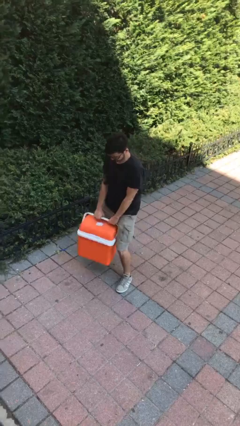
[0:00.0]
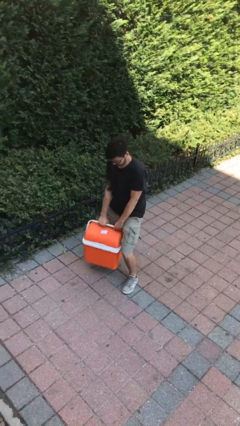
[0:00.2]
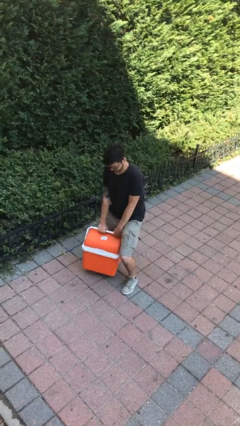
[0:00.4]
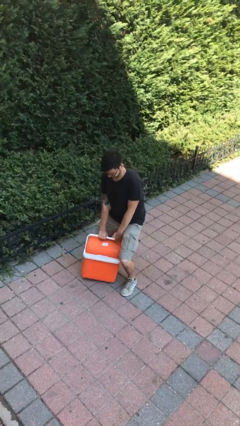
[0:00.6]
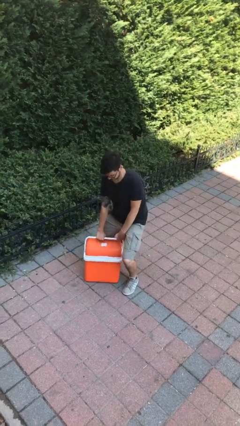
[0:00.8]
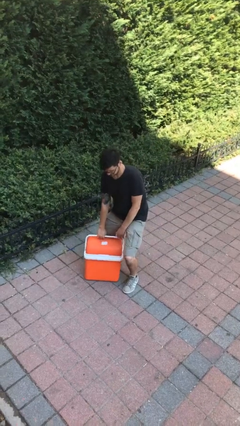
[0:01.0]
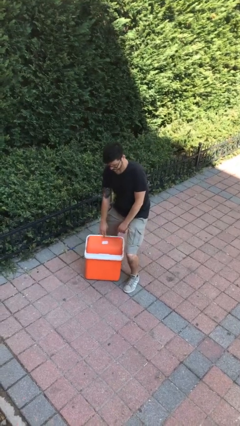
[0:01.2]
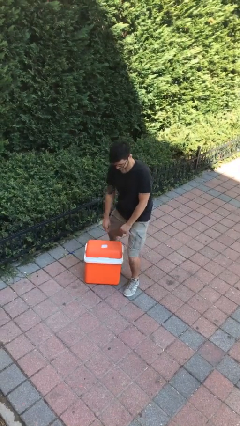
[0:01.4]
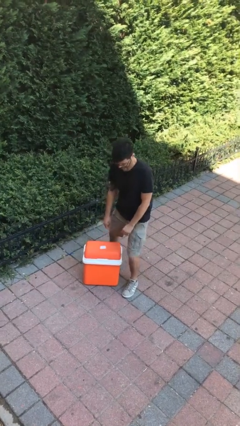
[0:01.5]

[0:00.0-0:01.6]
person puts down object on floor

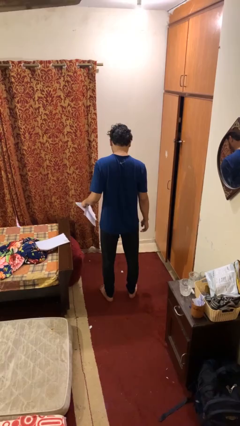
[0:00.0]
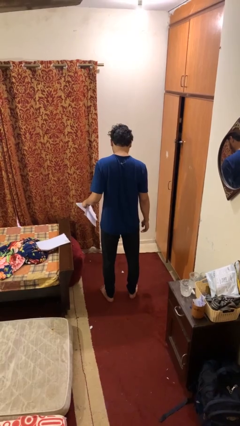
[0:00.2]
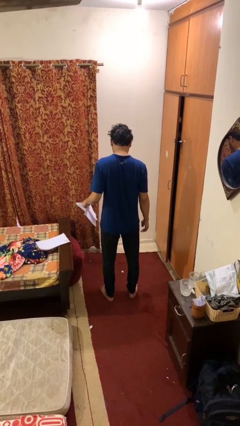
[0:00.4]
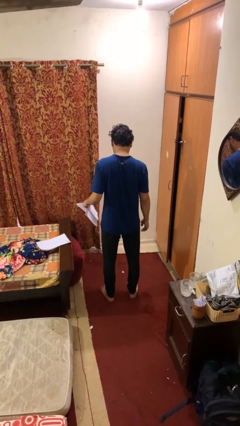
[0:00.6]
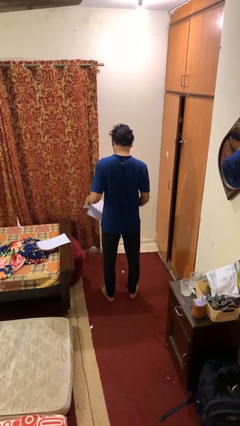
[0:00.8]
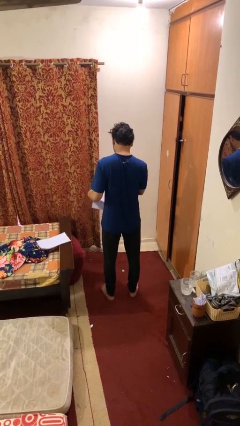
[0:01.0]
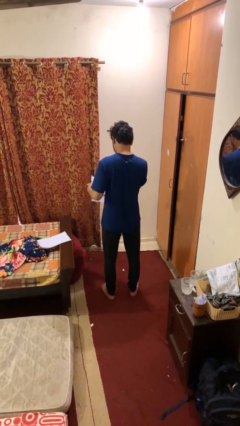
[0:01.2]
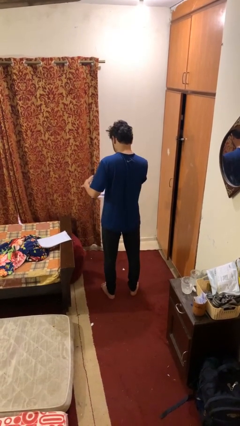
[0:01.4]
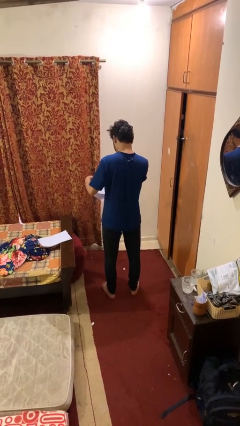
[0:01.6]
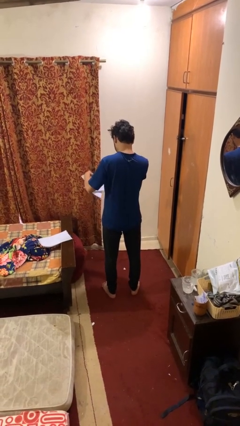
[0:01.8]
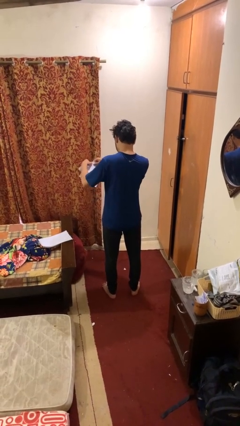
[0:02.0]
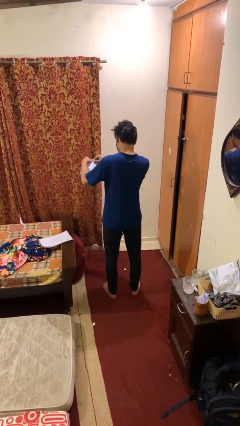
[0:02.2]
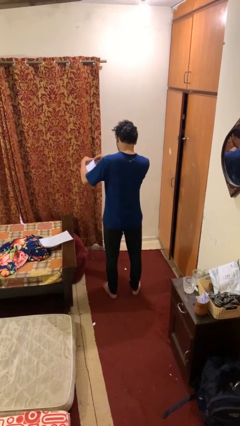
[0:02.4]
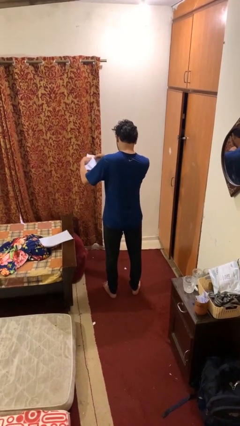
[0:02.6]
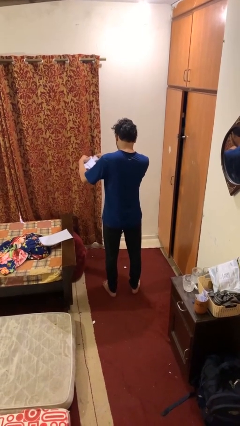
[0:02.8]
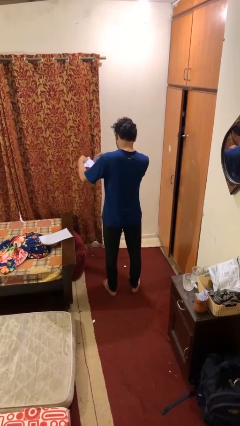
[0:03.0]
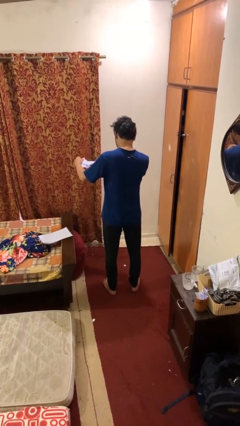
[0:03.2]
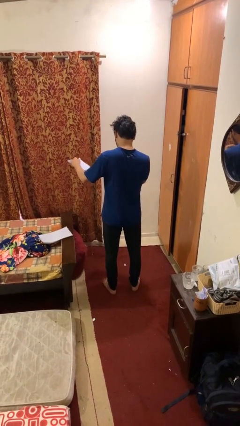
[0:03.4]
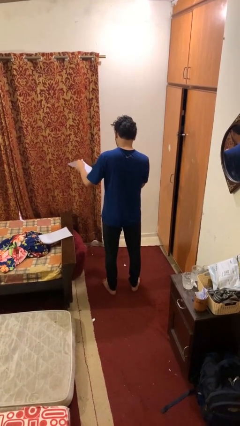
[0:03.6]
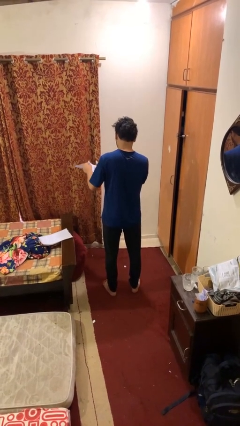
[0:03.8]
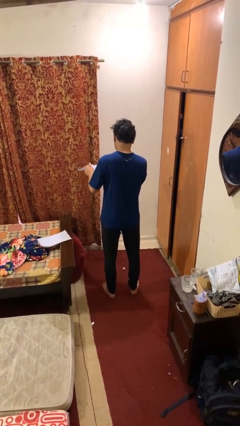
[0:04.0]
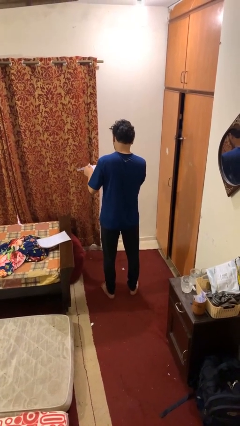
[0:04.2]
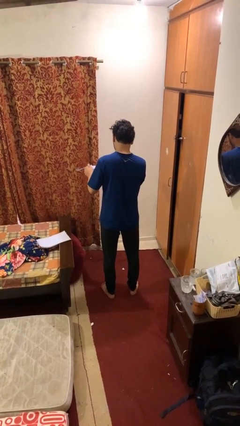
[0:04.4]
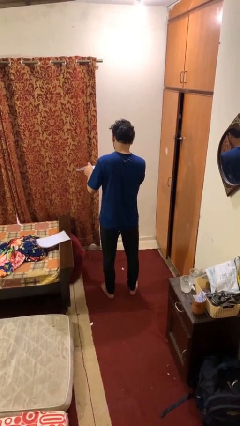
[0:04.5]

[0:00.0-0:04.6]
person tears paper

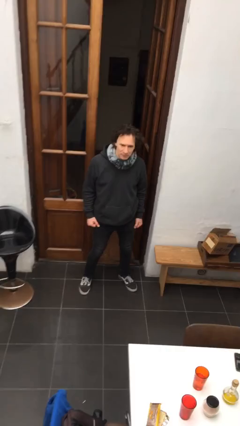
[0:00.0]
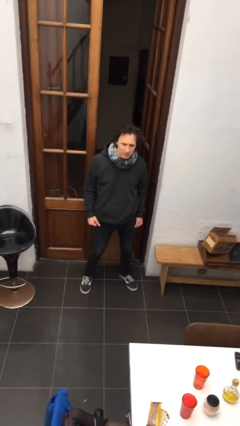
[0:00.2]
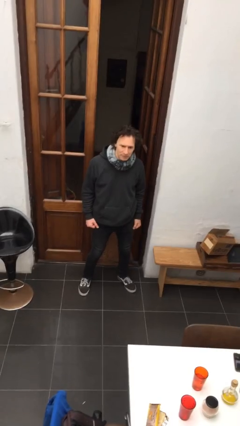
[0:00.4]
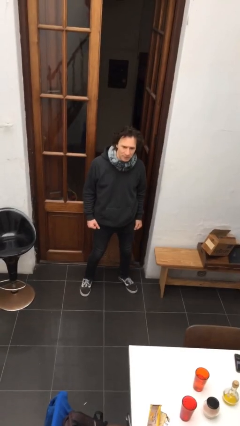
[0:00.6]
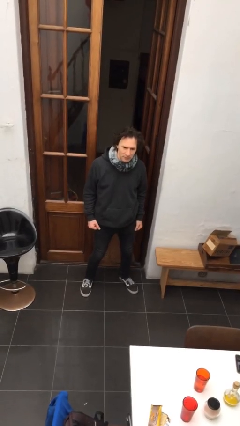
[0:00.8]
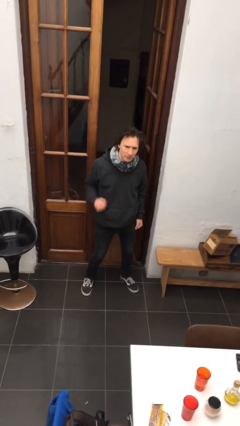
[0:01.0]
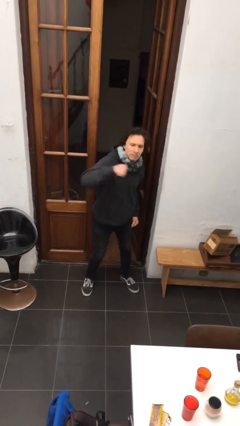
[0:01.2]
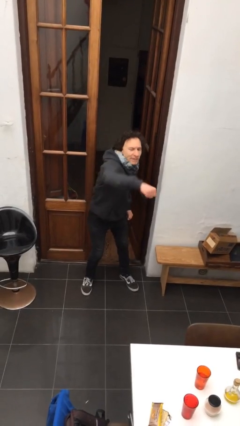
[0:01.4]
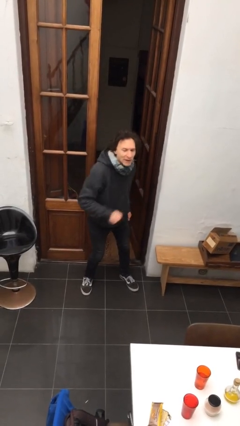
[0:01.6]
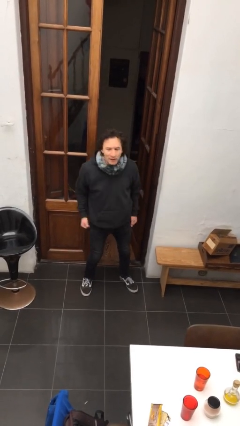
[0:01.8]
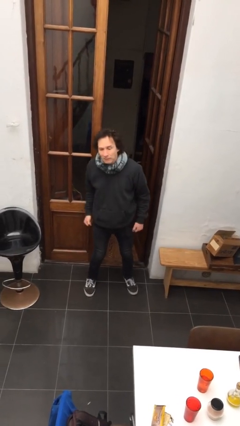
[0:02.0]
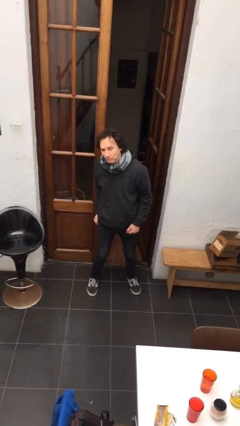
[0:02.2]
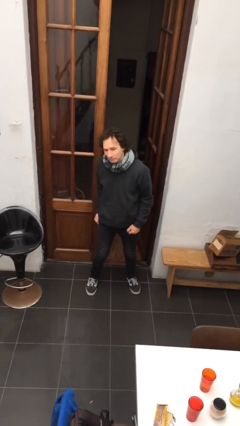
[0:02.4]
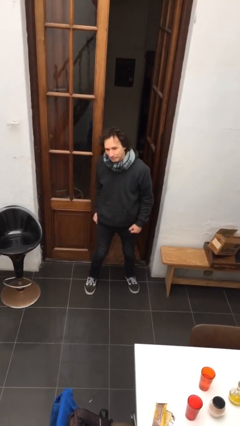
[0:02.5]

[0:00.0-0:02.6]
person punches

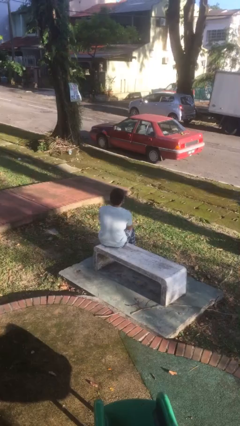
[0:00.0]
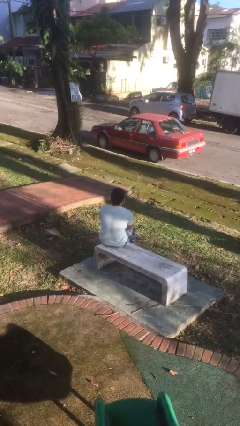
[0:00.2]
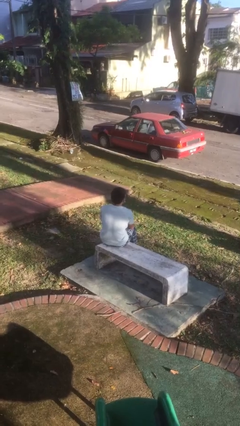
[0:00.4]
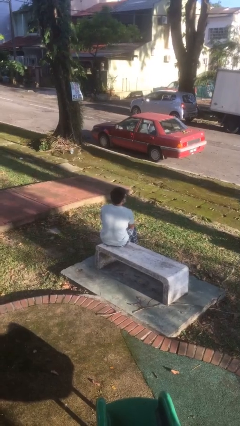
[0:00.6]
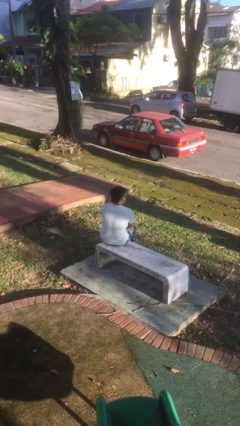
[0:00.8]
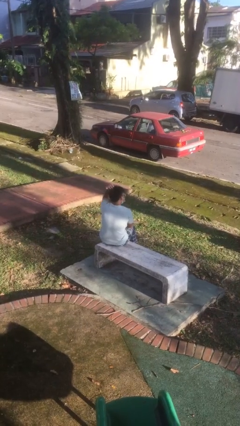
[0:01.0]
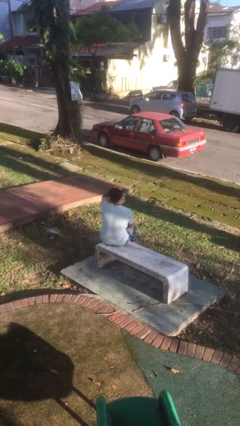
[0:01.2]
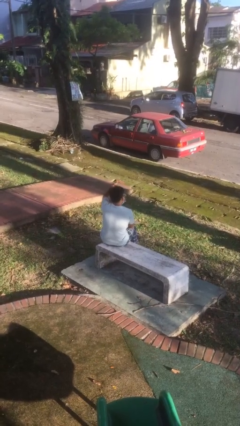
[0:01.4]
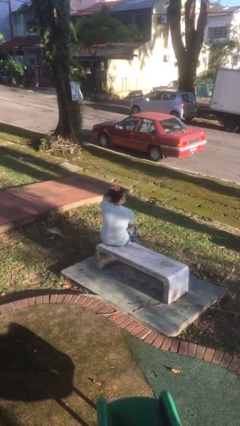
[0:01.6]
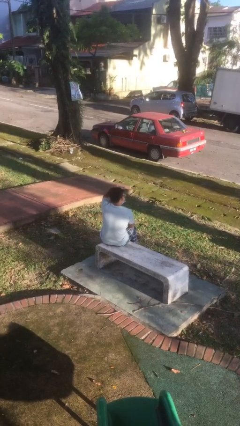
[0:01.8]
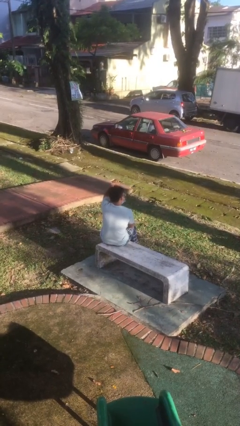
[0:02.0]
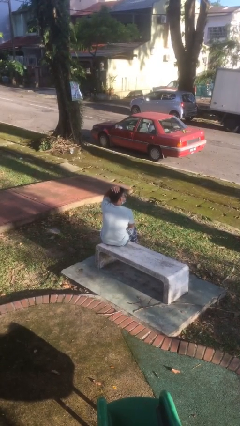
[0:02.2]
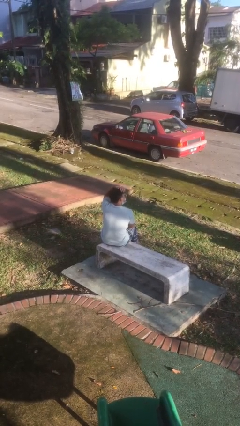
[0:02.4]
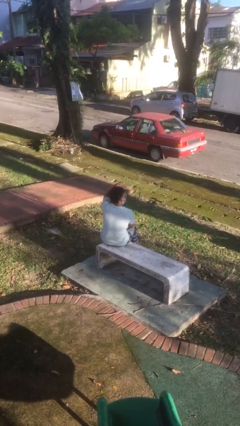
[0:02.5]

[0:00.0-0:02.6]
person pats head

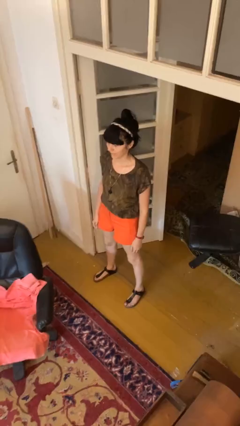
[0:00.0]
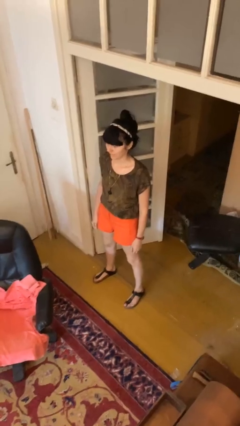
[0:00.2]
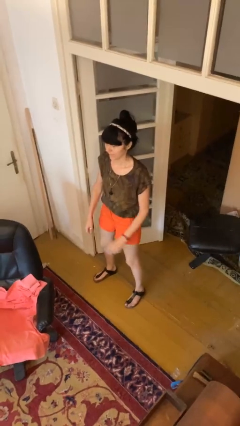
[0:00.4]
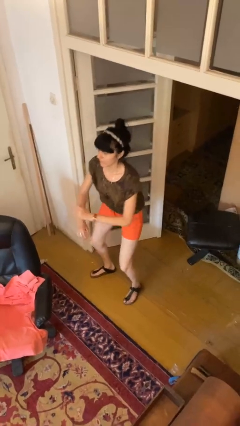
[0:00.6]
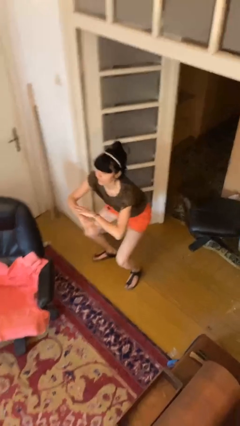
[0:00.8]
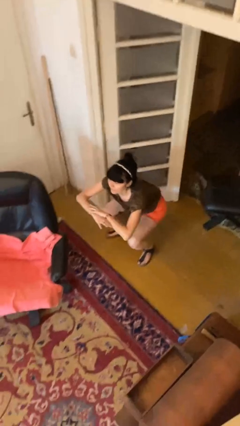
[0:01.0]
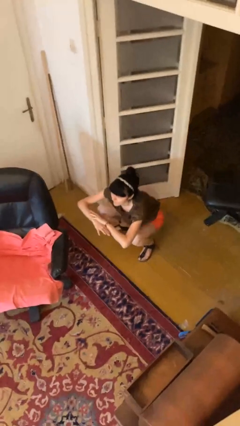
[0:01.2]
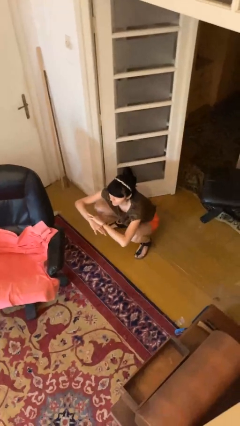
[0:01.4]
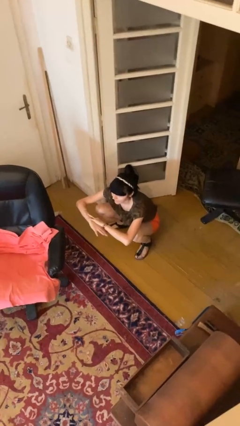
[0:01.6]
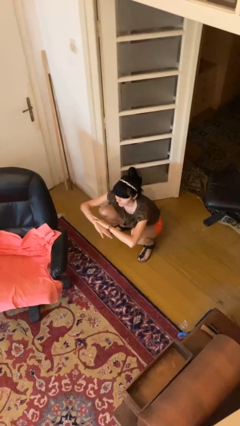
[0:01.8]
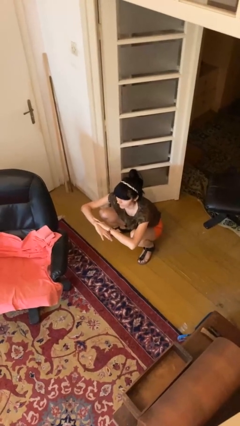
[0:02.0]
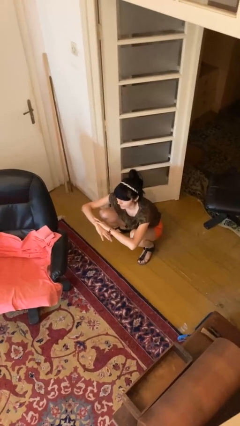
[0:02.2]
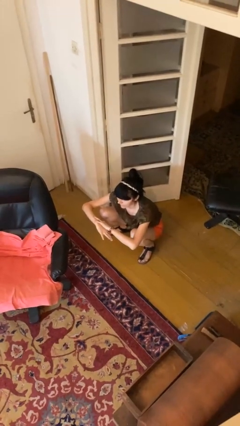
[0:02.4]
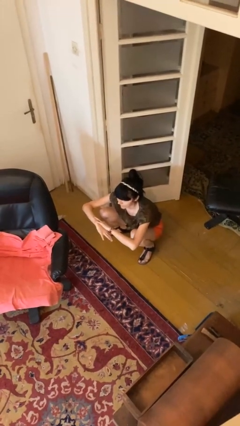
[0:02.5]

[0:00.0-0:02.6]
person squats

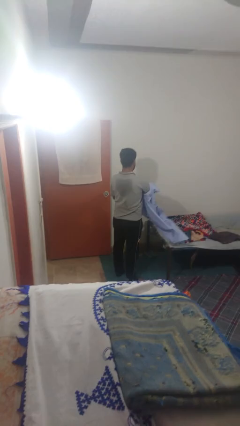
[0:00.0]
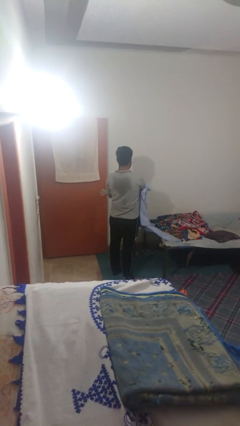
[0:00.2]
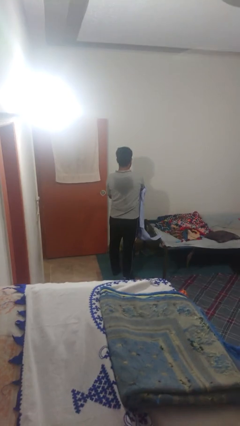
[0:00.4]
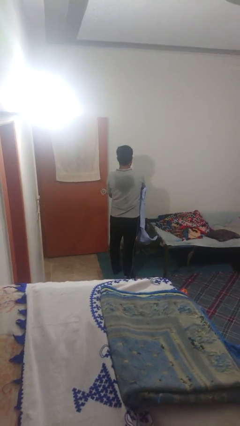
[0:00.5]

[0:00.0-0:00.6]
person puts on shirt

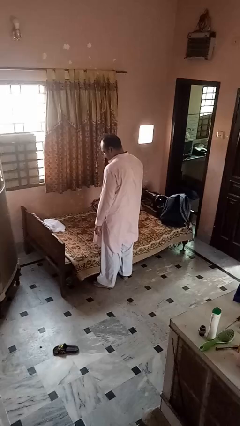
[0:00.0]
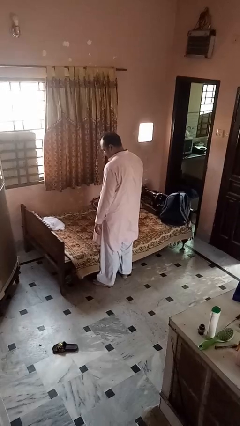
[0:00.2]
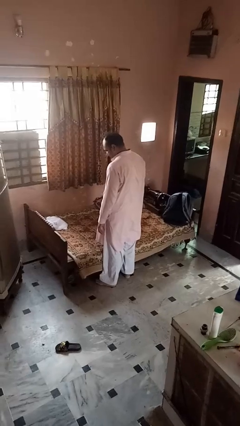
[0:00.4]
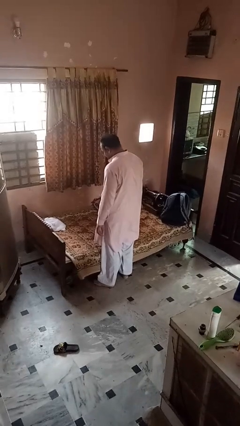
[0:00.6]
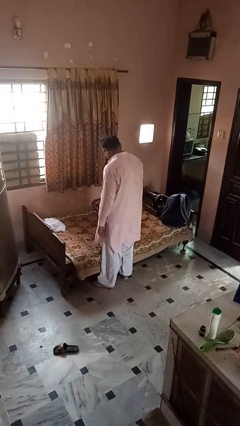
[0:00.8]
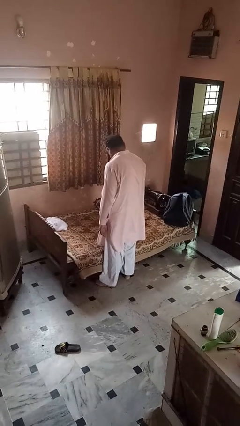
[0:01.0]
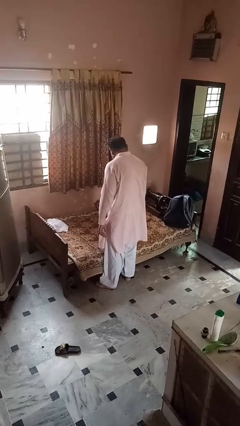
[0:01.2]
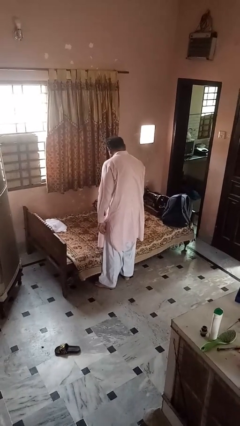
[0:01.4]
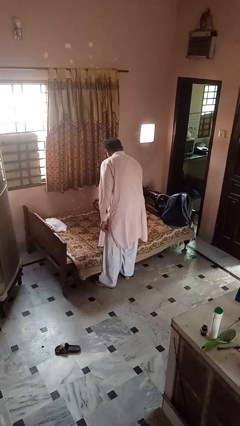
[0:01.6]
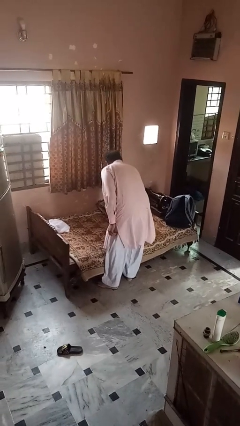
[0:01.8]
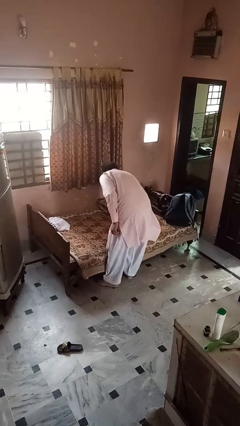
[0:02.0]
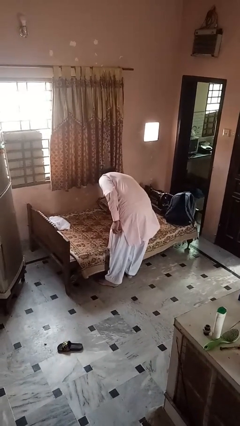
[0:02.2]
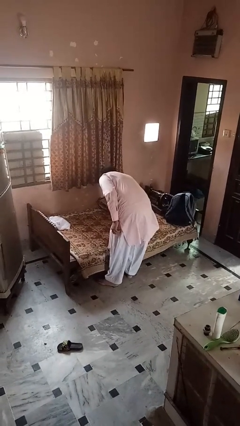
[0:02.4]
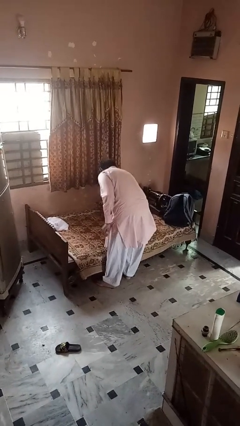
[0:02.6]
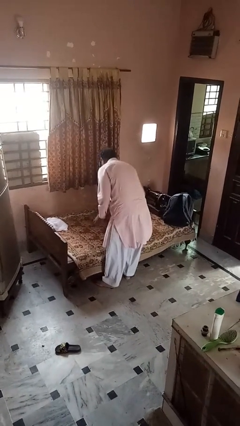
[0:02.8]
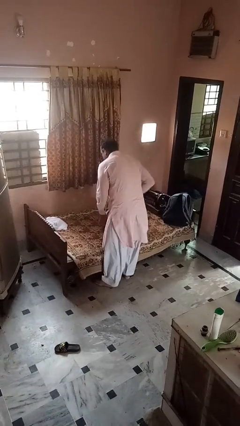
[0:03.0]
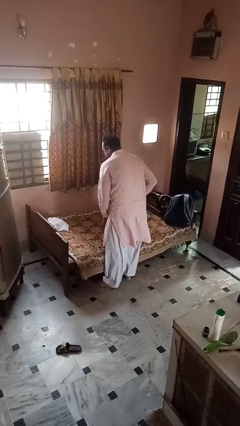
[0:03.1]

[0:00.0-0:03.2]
person searches under bed
